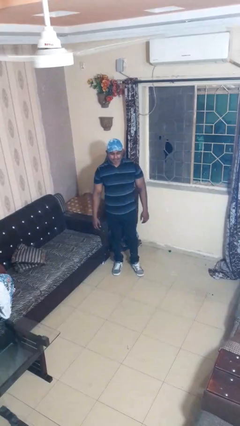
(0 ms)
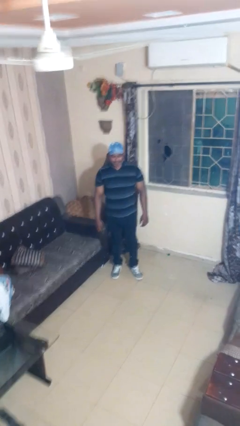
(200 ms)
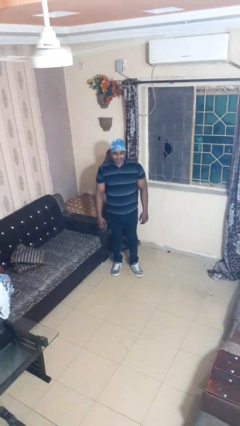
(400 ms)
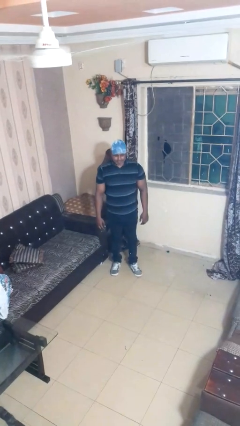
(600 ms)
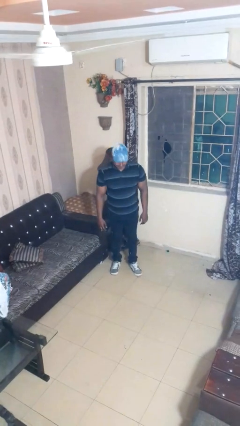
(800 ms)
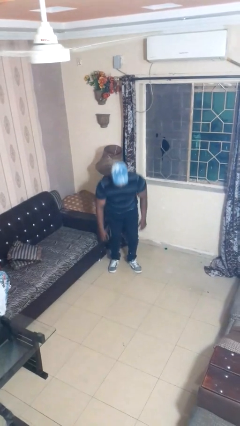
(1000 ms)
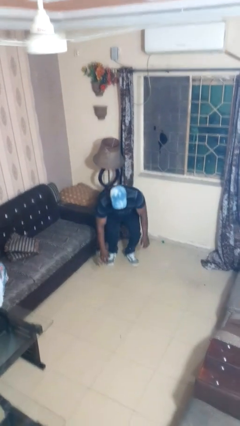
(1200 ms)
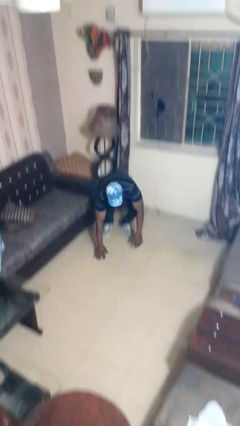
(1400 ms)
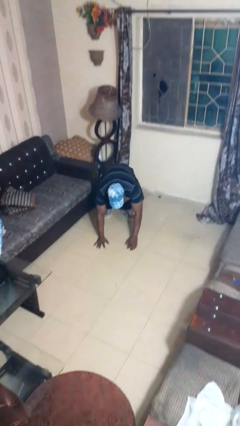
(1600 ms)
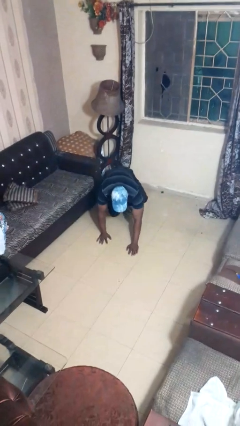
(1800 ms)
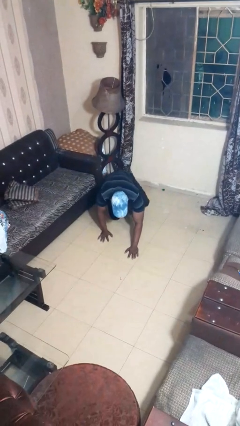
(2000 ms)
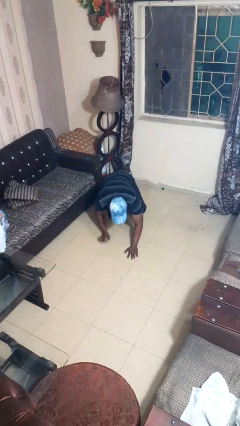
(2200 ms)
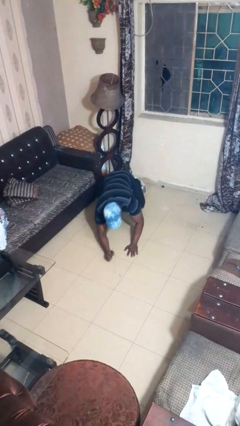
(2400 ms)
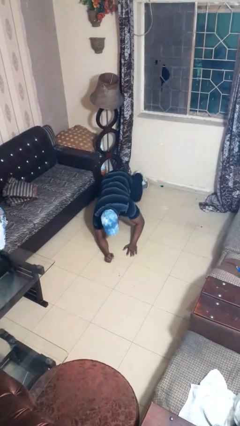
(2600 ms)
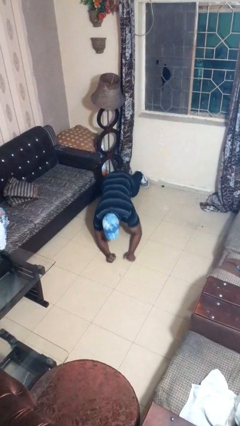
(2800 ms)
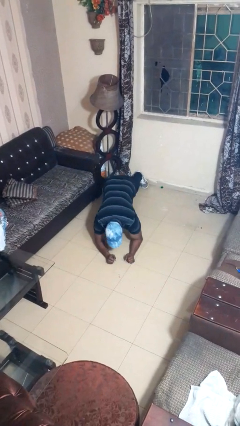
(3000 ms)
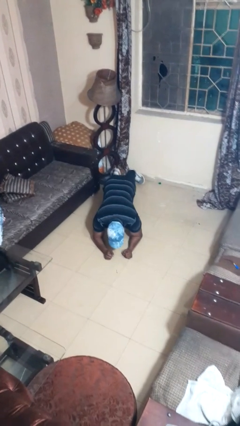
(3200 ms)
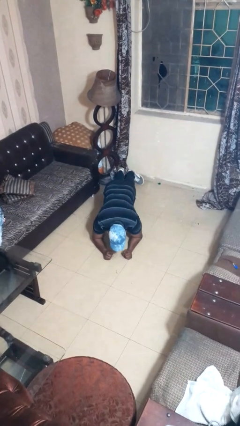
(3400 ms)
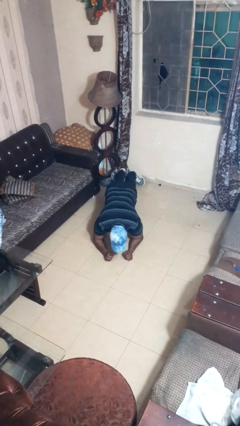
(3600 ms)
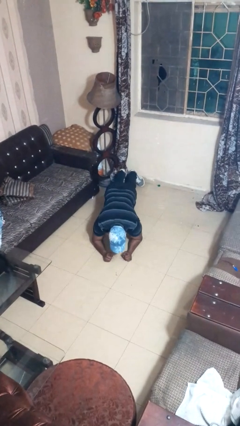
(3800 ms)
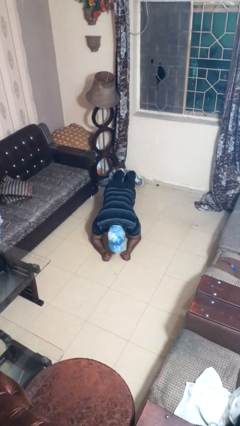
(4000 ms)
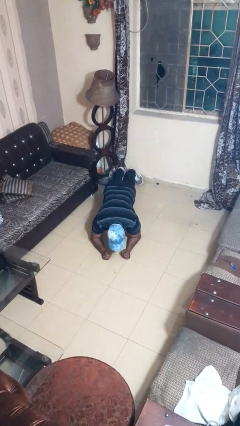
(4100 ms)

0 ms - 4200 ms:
person exercises with plank

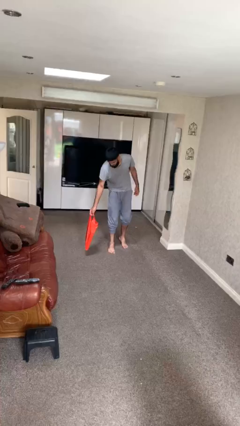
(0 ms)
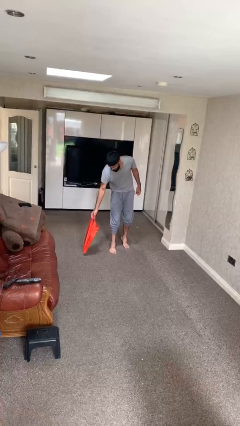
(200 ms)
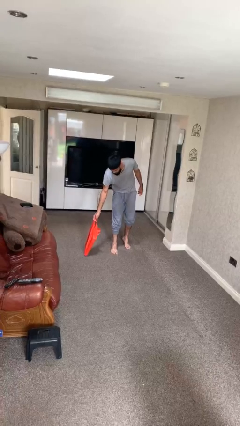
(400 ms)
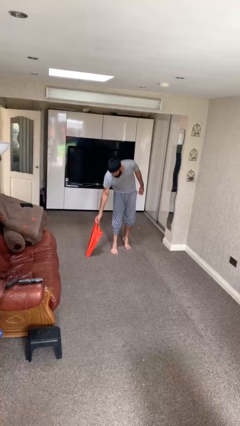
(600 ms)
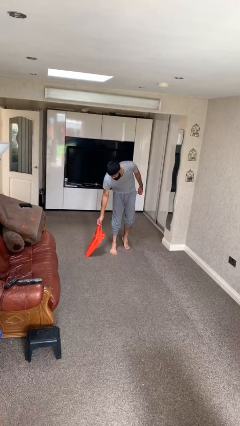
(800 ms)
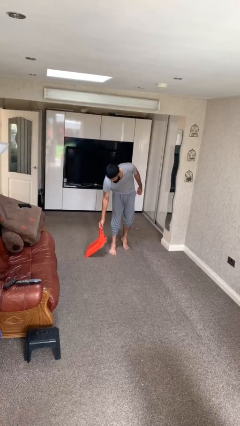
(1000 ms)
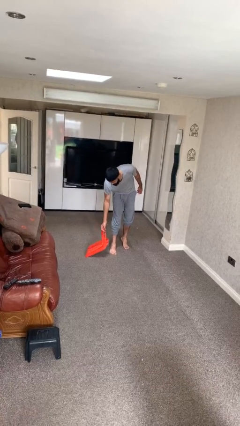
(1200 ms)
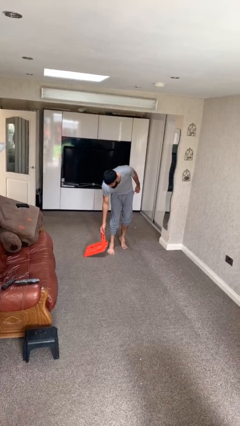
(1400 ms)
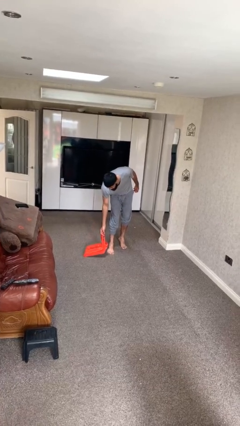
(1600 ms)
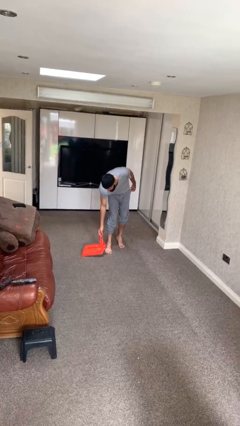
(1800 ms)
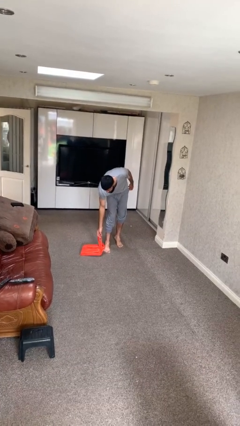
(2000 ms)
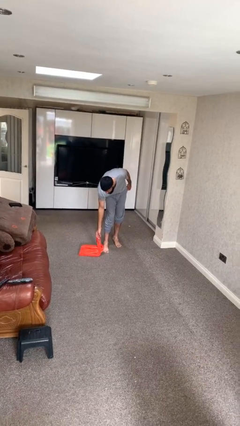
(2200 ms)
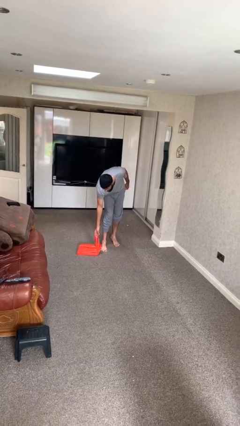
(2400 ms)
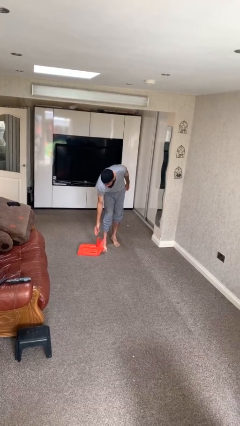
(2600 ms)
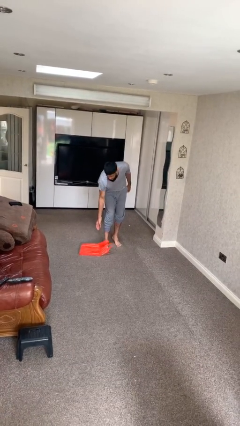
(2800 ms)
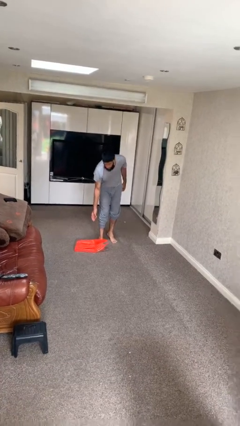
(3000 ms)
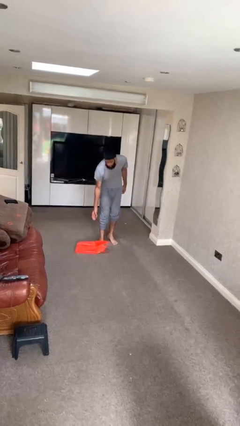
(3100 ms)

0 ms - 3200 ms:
person puts down object on floor

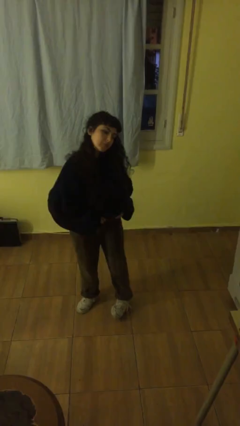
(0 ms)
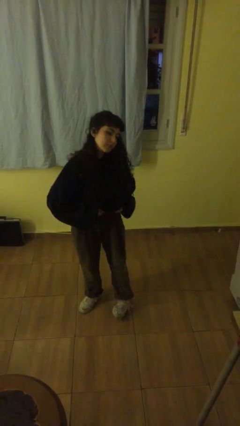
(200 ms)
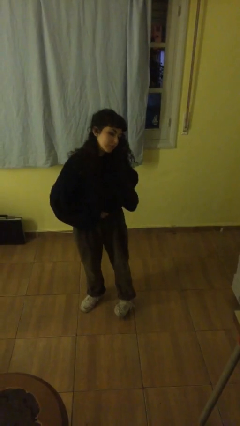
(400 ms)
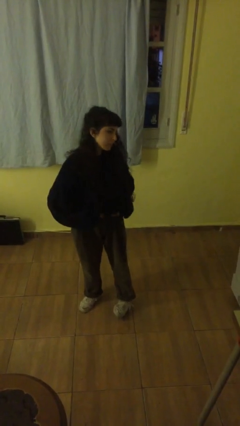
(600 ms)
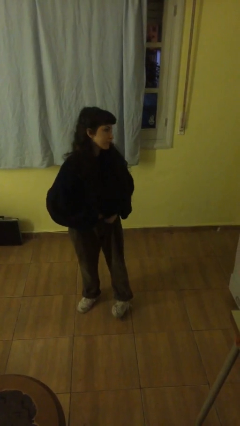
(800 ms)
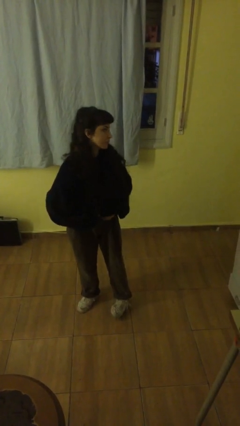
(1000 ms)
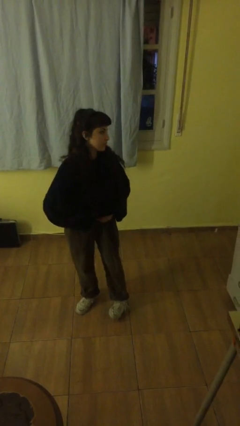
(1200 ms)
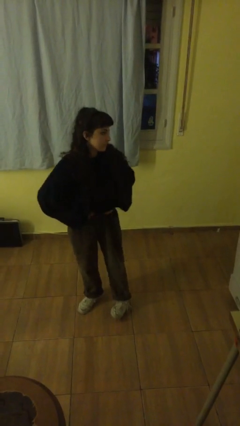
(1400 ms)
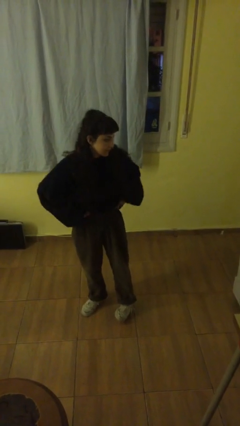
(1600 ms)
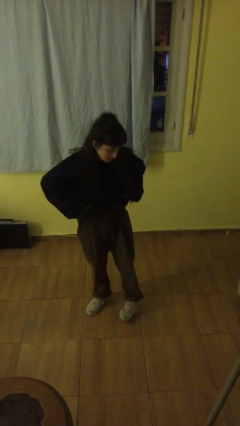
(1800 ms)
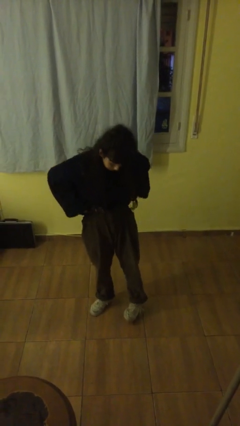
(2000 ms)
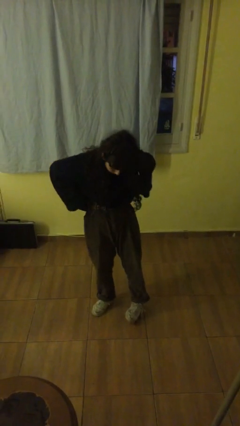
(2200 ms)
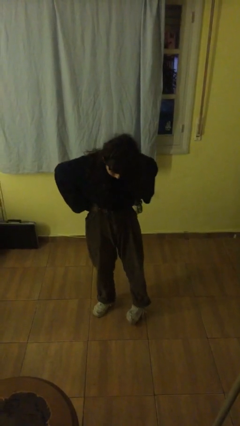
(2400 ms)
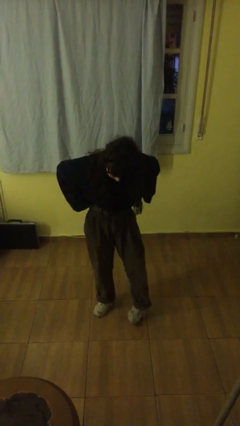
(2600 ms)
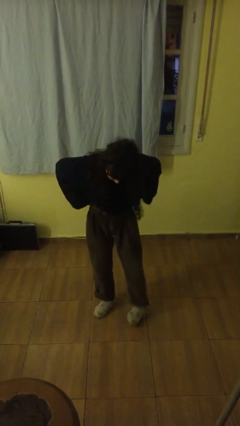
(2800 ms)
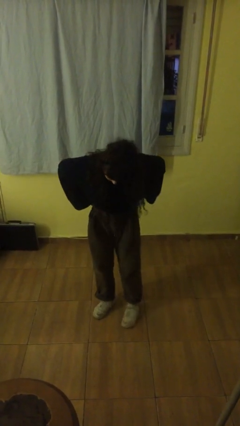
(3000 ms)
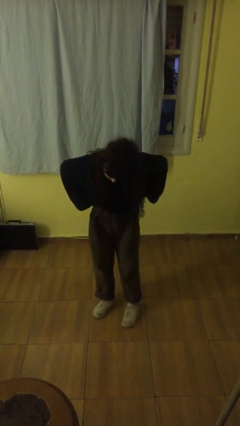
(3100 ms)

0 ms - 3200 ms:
person hikes up pants

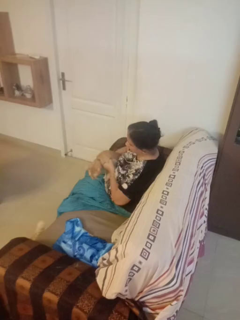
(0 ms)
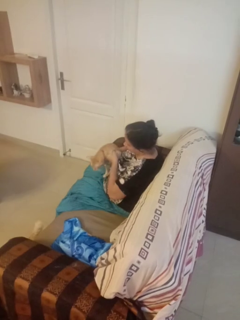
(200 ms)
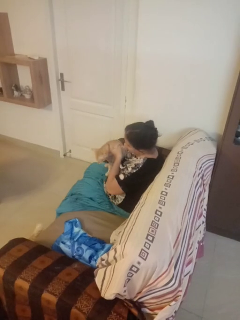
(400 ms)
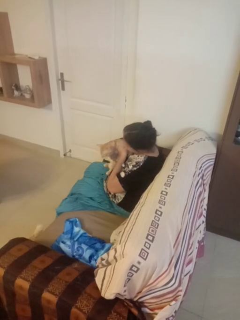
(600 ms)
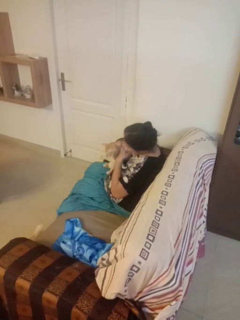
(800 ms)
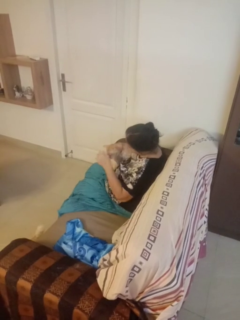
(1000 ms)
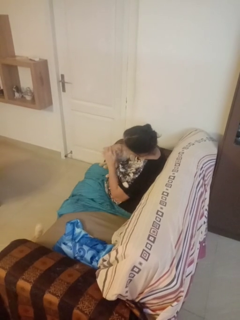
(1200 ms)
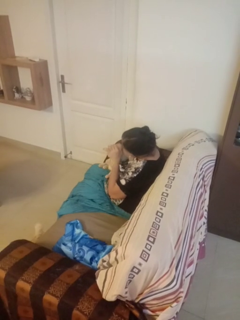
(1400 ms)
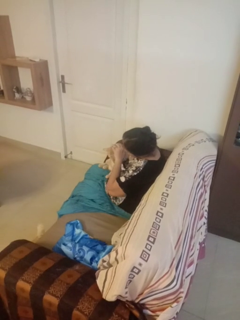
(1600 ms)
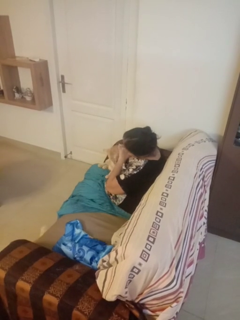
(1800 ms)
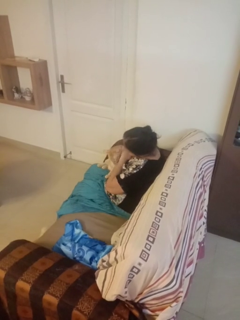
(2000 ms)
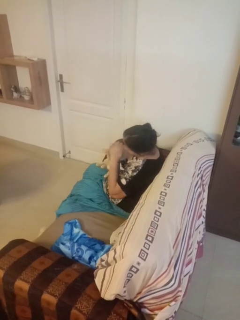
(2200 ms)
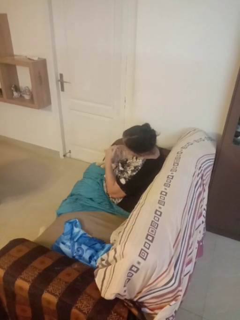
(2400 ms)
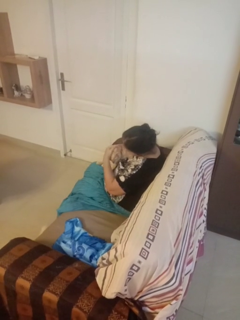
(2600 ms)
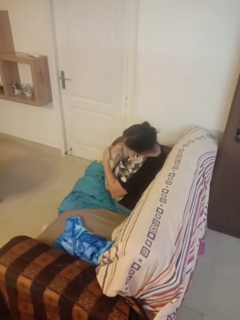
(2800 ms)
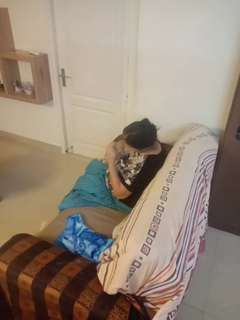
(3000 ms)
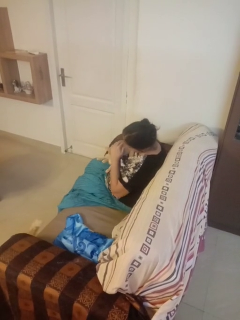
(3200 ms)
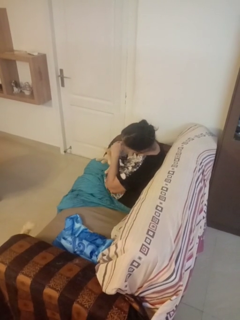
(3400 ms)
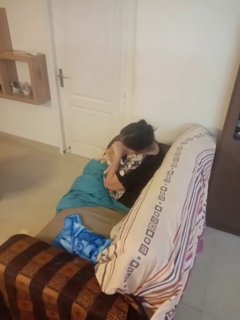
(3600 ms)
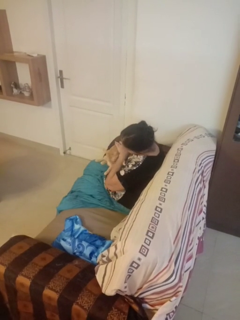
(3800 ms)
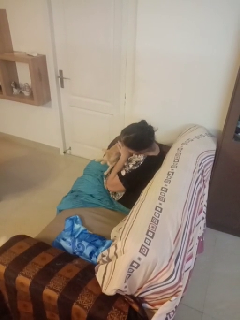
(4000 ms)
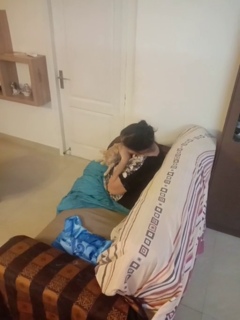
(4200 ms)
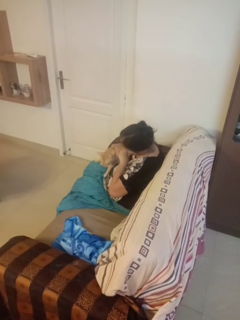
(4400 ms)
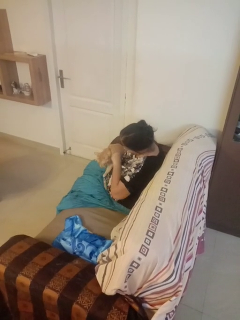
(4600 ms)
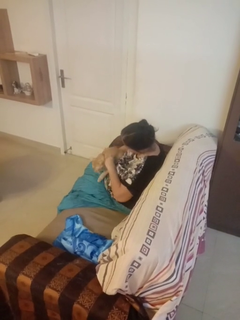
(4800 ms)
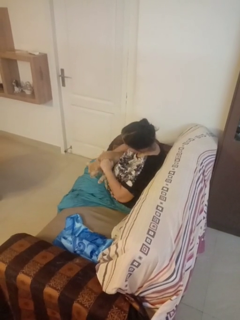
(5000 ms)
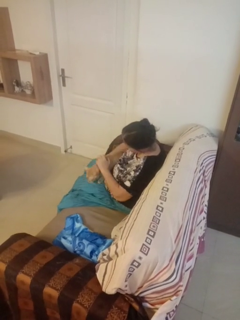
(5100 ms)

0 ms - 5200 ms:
person hugs cat

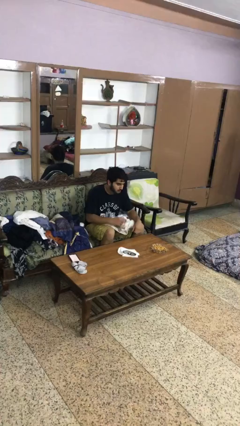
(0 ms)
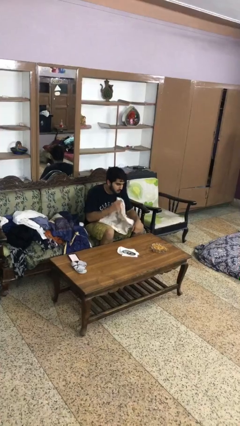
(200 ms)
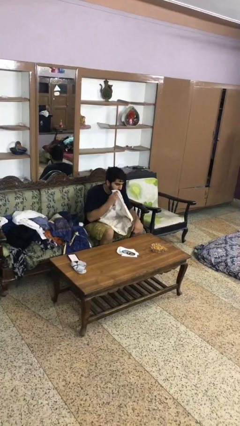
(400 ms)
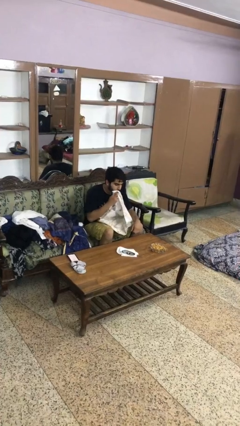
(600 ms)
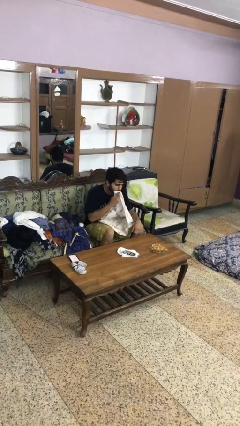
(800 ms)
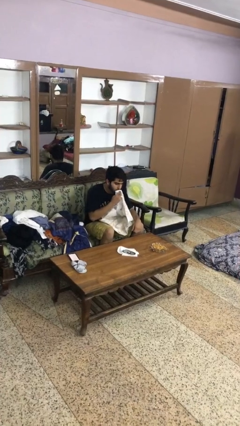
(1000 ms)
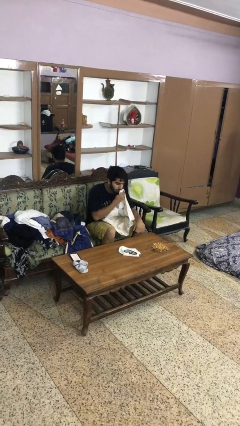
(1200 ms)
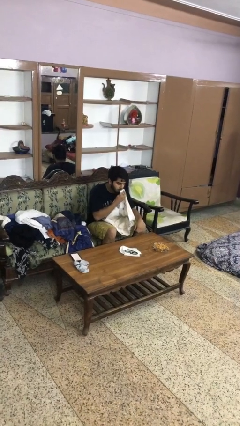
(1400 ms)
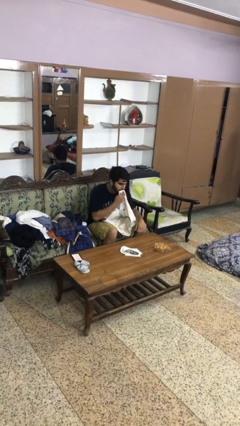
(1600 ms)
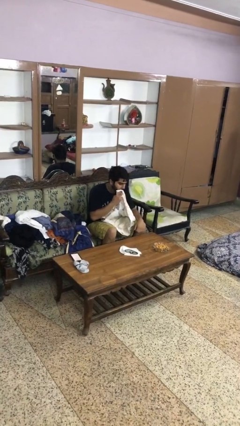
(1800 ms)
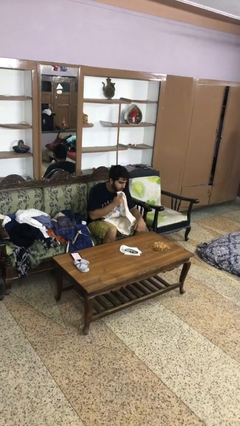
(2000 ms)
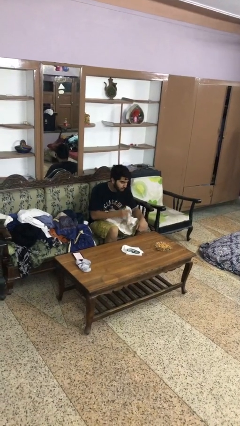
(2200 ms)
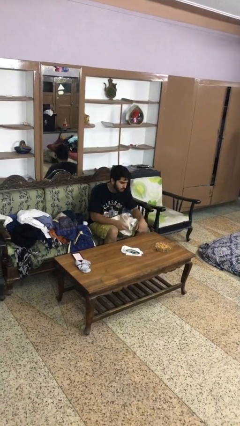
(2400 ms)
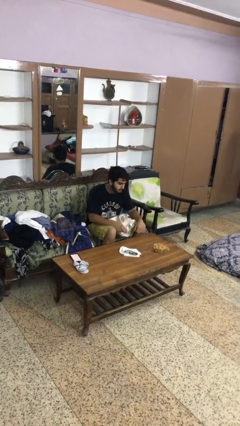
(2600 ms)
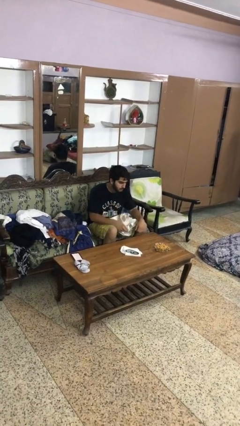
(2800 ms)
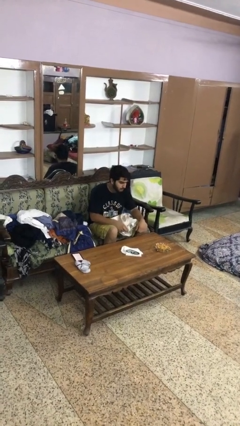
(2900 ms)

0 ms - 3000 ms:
person wipes mouth with napkin

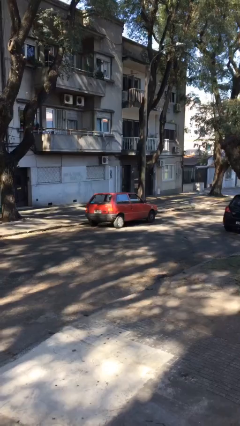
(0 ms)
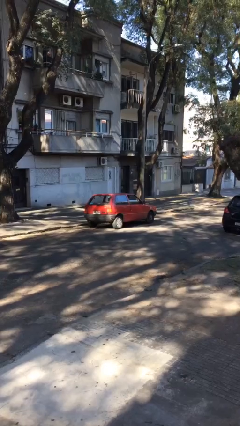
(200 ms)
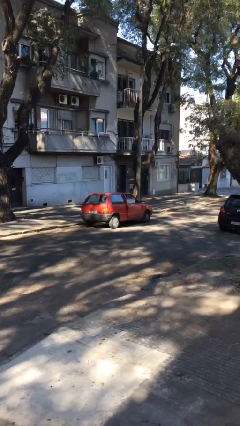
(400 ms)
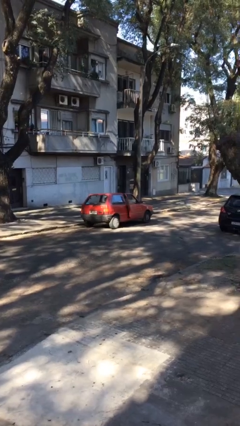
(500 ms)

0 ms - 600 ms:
car drops off person
